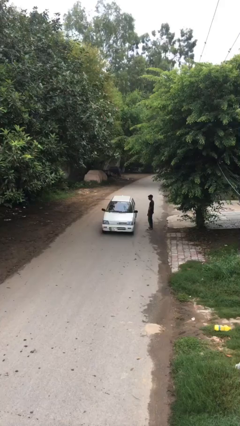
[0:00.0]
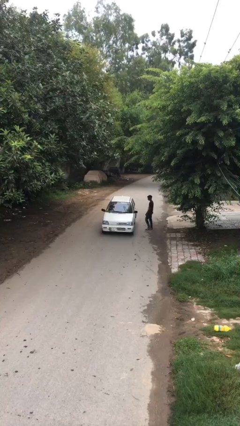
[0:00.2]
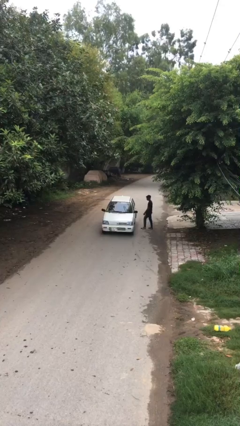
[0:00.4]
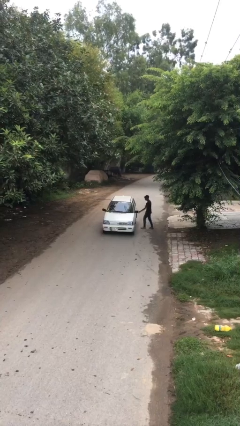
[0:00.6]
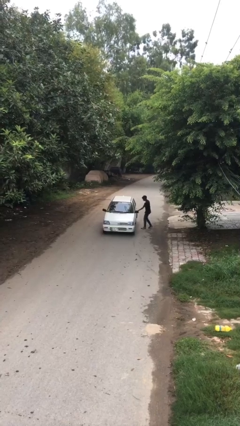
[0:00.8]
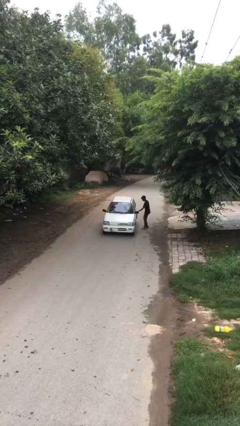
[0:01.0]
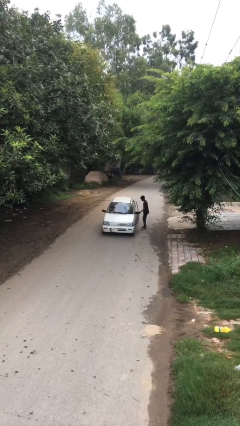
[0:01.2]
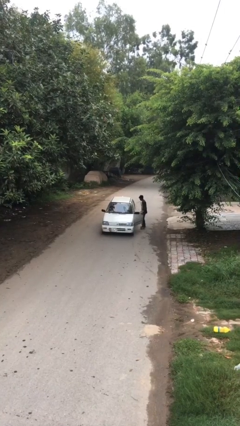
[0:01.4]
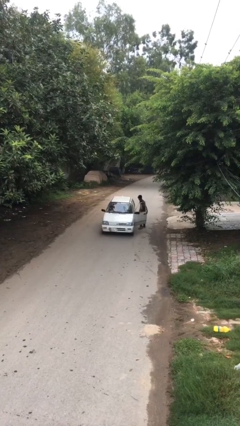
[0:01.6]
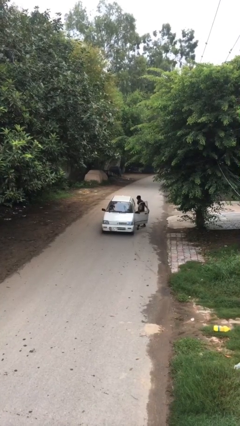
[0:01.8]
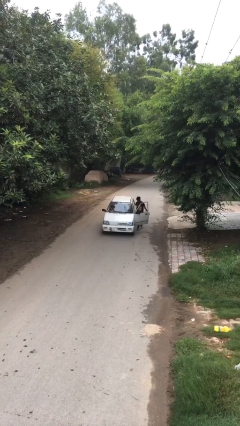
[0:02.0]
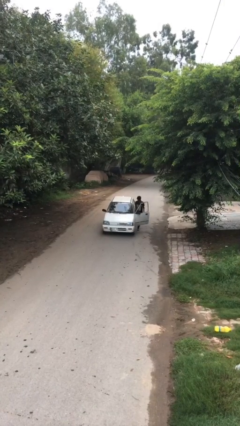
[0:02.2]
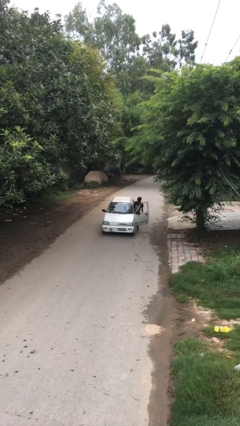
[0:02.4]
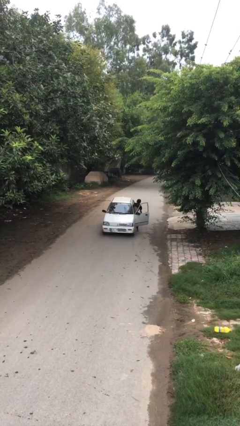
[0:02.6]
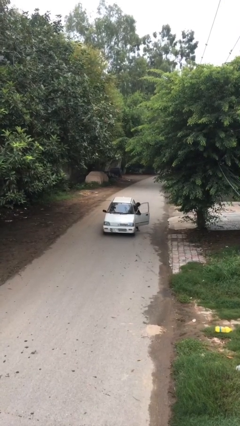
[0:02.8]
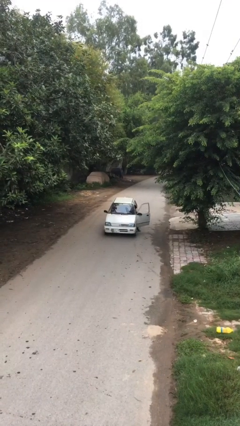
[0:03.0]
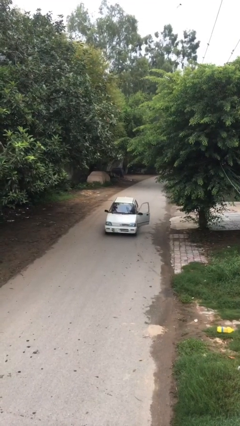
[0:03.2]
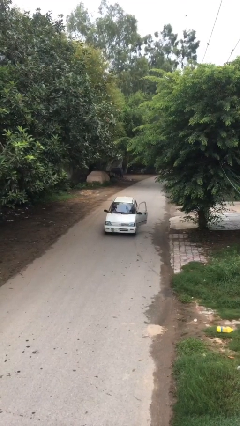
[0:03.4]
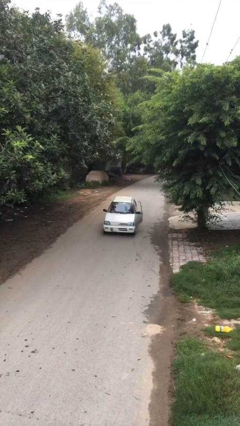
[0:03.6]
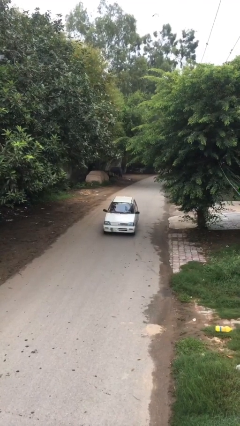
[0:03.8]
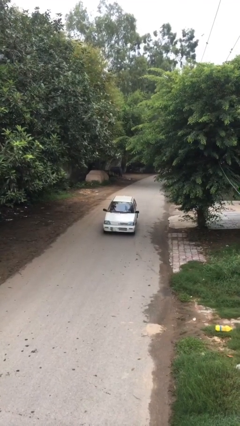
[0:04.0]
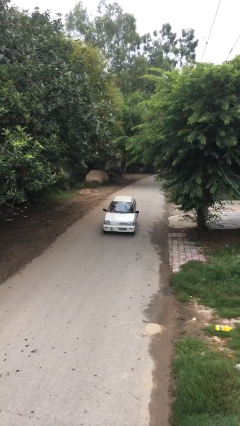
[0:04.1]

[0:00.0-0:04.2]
car picks up person

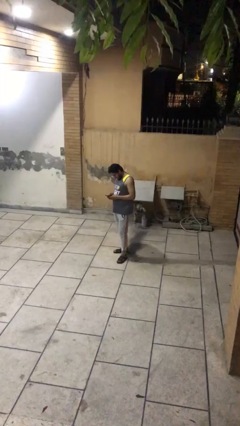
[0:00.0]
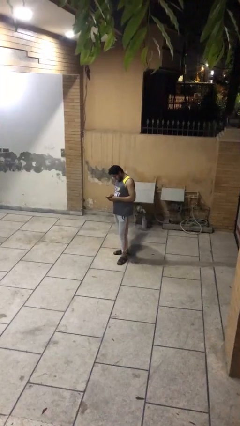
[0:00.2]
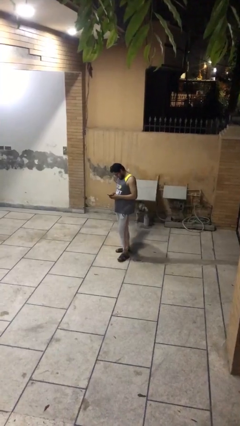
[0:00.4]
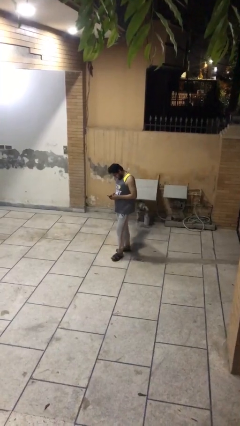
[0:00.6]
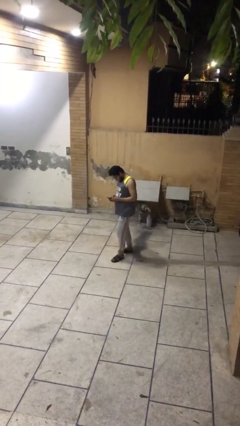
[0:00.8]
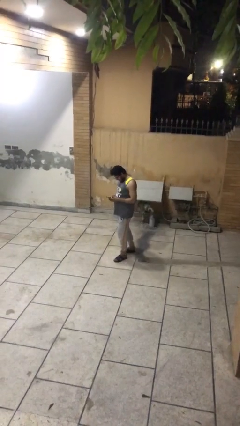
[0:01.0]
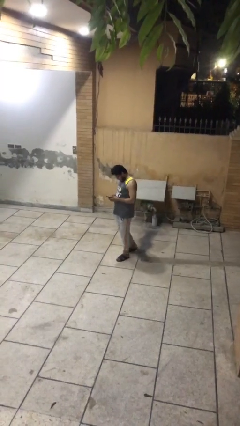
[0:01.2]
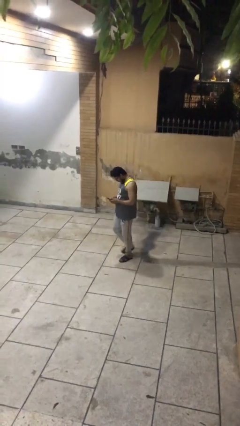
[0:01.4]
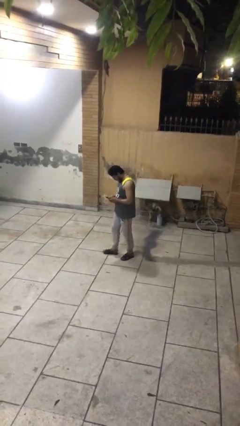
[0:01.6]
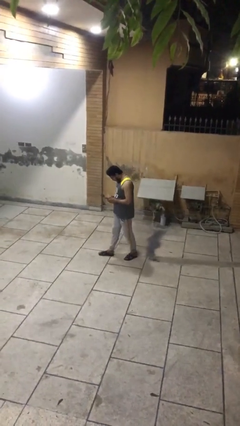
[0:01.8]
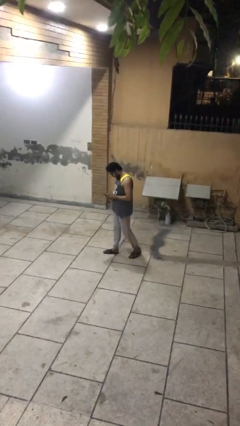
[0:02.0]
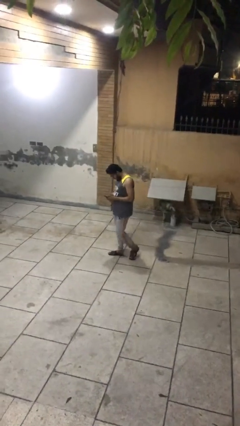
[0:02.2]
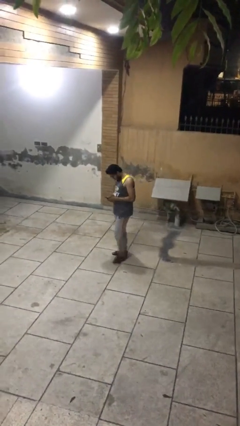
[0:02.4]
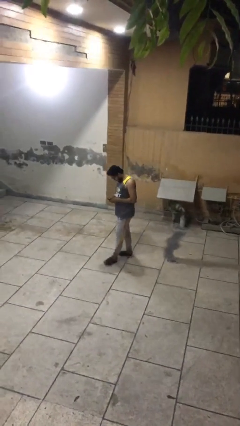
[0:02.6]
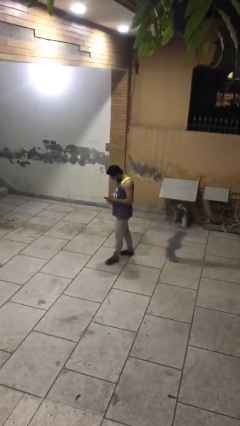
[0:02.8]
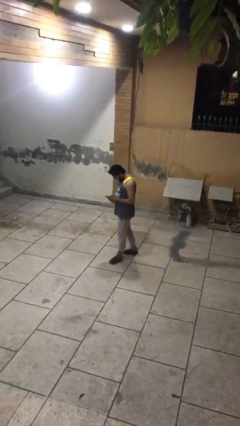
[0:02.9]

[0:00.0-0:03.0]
person texts on phone

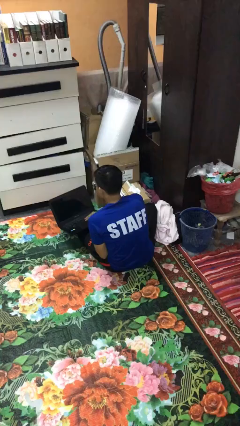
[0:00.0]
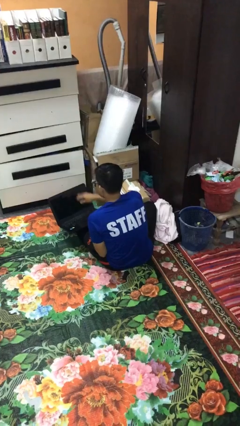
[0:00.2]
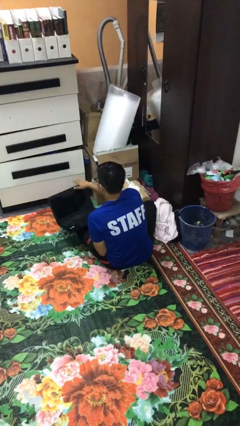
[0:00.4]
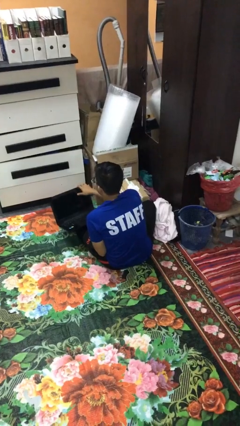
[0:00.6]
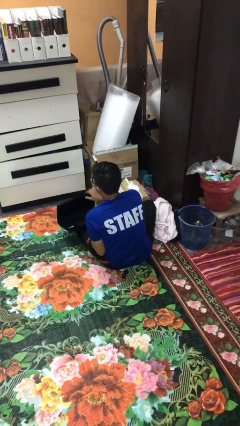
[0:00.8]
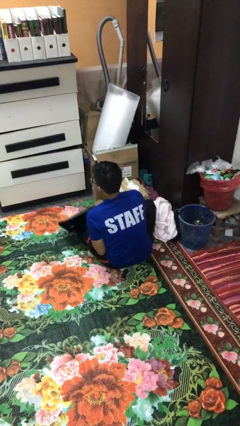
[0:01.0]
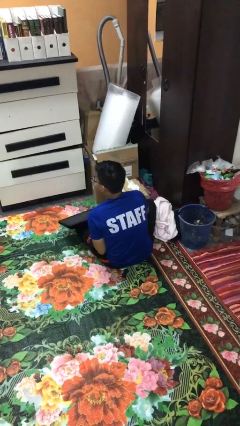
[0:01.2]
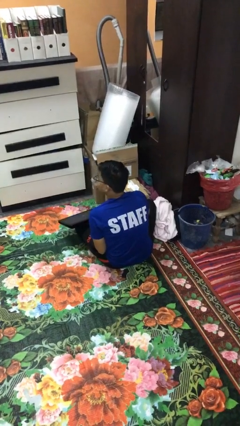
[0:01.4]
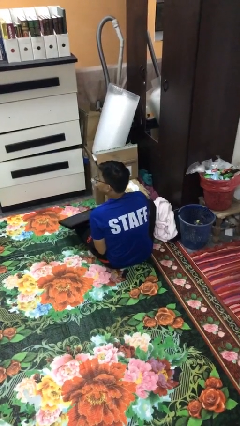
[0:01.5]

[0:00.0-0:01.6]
person closes laptop

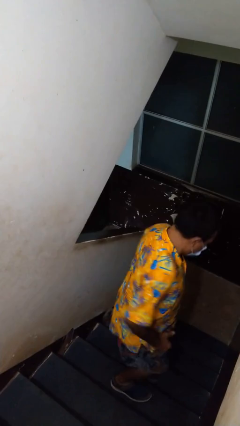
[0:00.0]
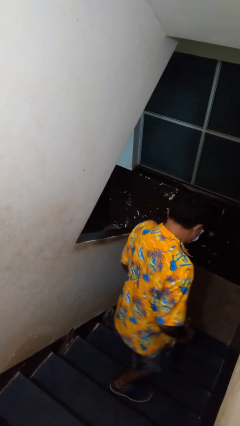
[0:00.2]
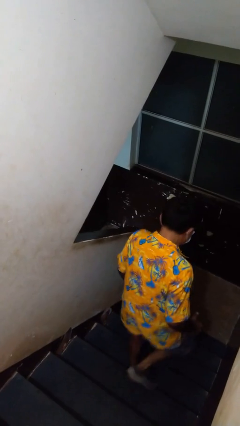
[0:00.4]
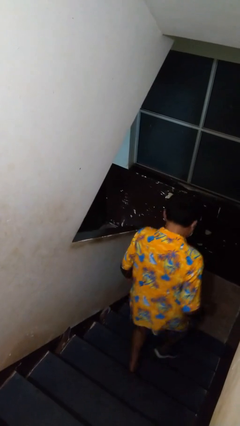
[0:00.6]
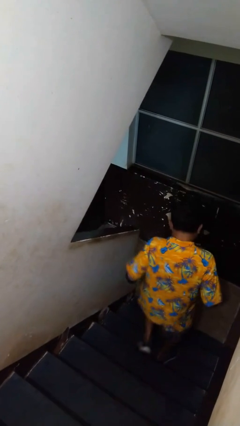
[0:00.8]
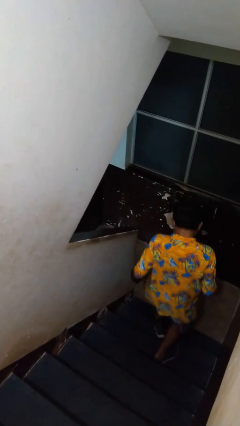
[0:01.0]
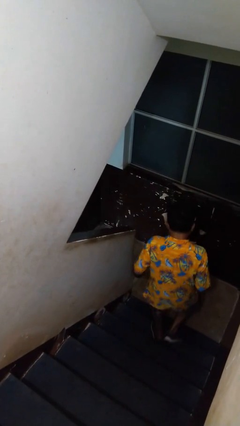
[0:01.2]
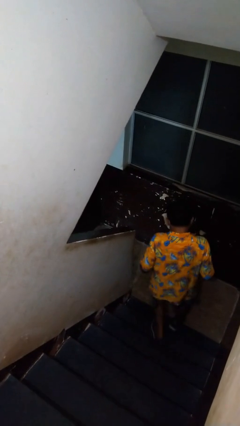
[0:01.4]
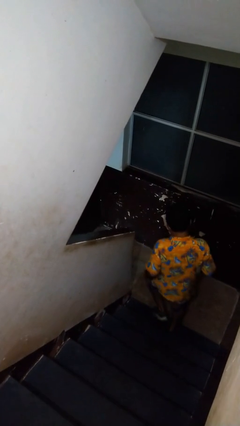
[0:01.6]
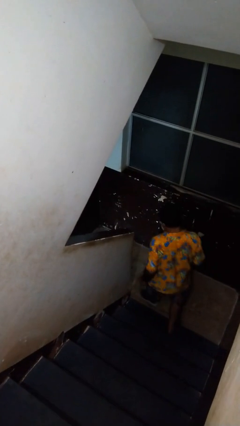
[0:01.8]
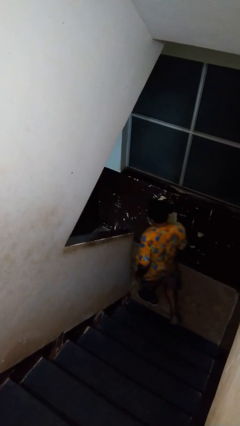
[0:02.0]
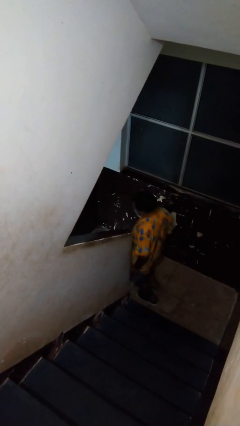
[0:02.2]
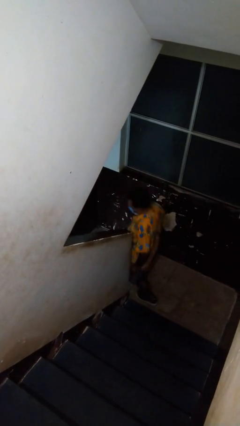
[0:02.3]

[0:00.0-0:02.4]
person climbs down stairs

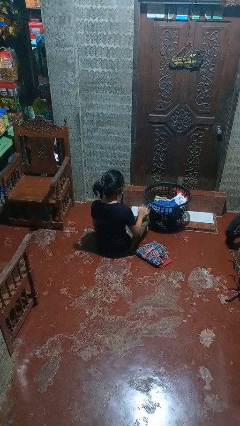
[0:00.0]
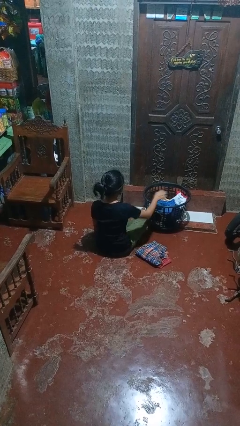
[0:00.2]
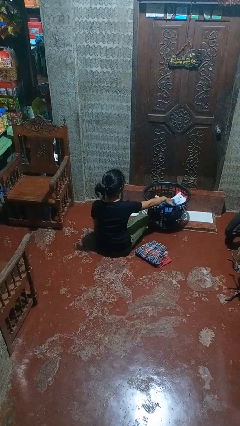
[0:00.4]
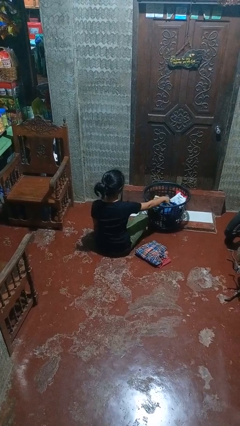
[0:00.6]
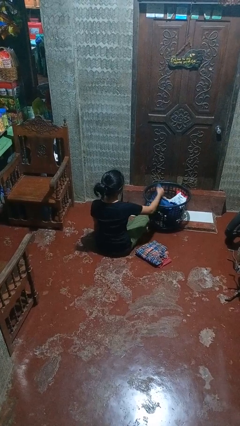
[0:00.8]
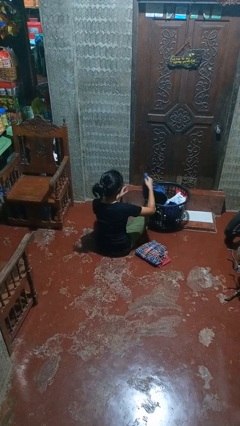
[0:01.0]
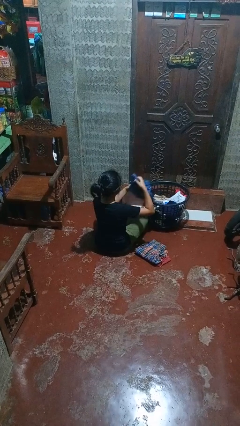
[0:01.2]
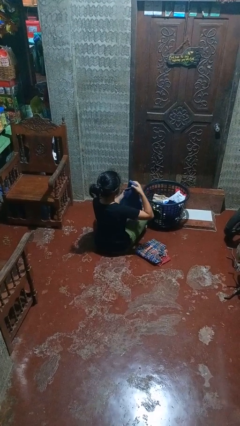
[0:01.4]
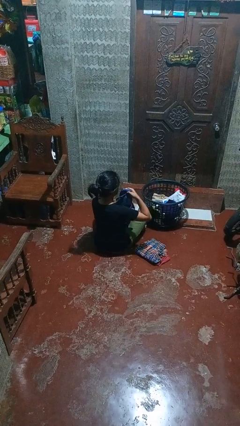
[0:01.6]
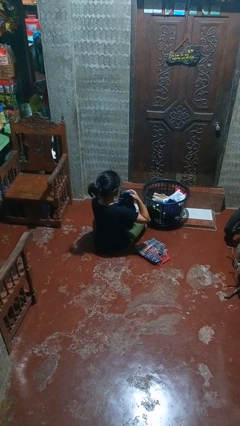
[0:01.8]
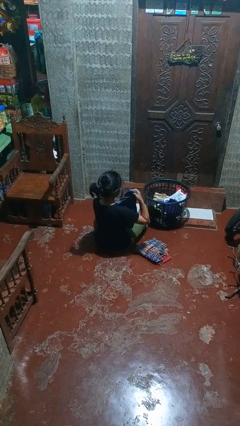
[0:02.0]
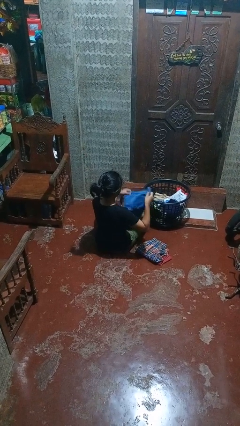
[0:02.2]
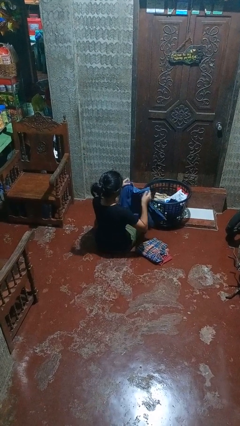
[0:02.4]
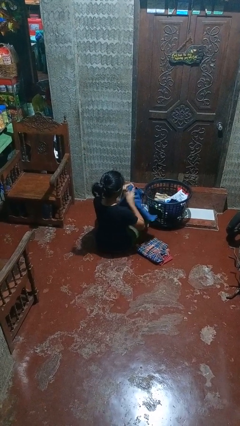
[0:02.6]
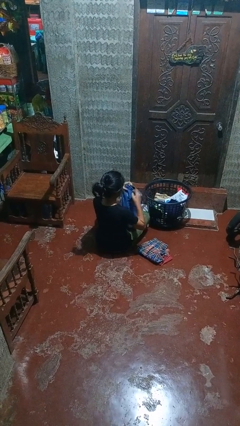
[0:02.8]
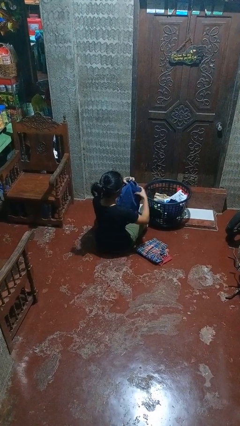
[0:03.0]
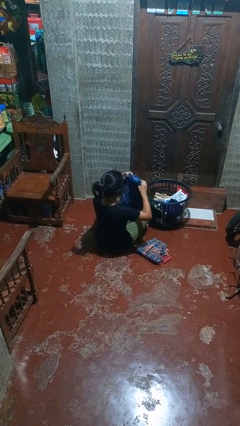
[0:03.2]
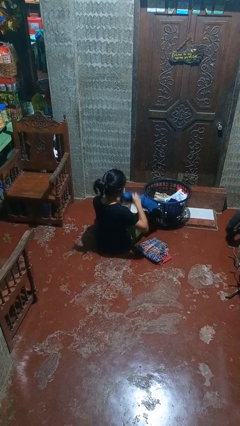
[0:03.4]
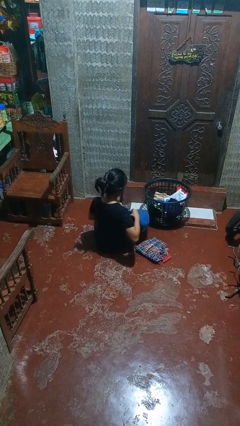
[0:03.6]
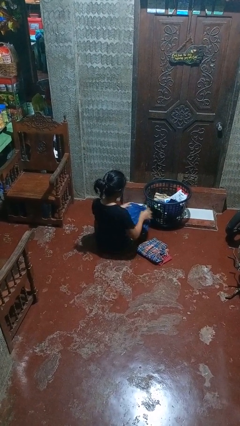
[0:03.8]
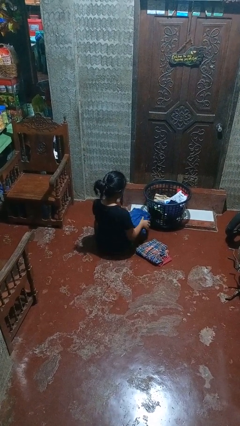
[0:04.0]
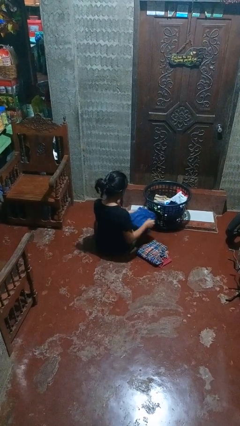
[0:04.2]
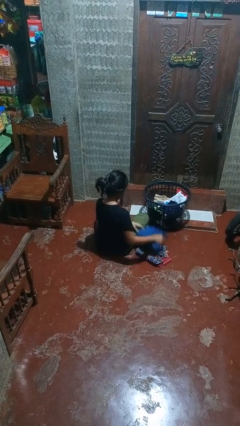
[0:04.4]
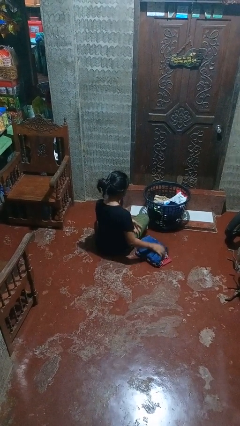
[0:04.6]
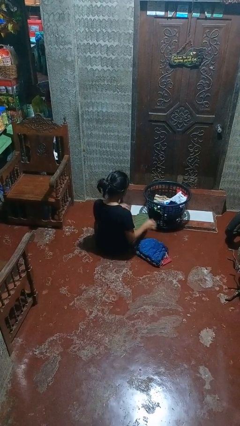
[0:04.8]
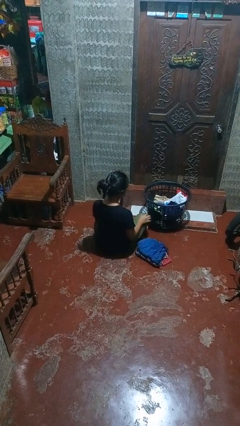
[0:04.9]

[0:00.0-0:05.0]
person folds pants

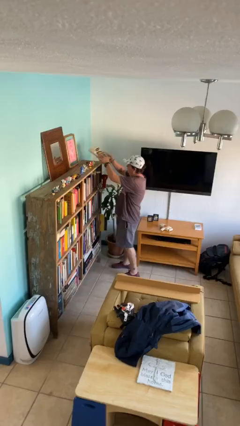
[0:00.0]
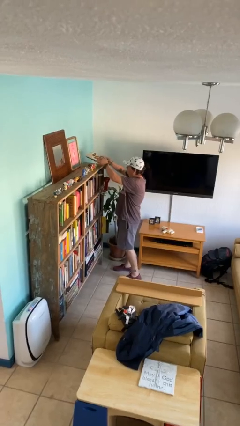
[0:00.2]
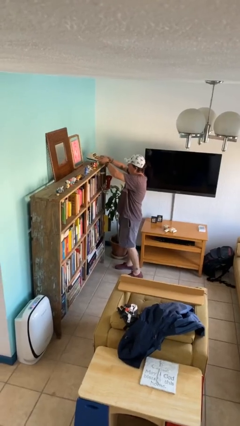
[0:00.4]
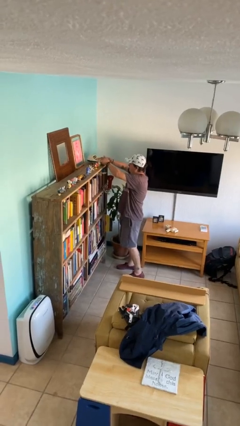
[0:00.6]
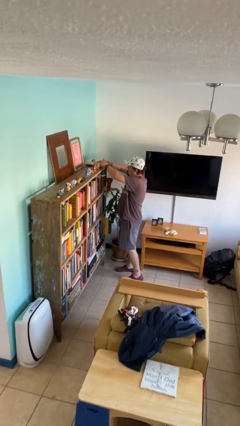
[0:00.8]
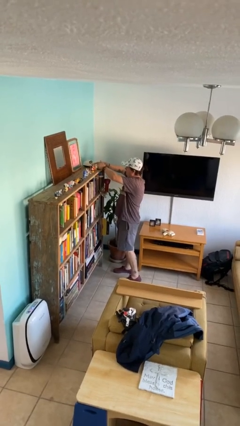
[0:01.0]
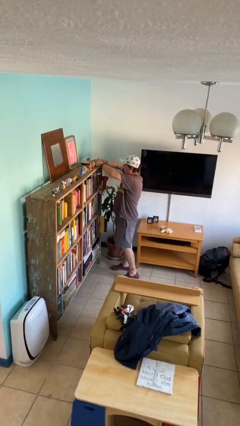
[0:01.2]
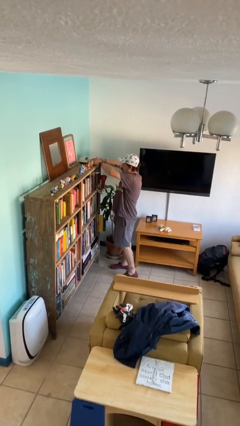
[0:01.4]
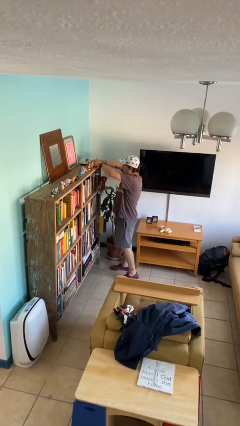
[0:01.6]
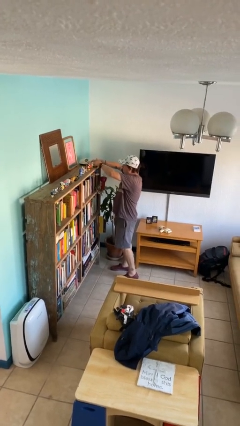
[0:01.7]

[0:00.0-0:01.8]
person puts down object on shelf
